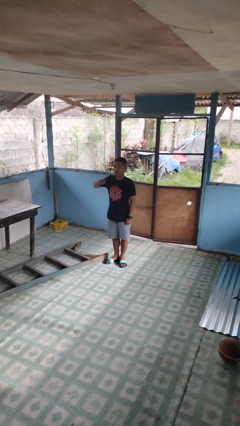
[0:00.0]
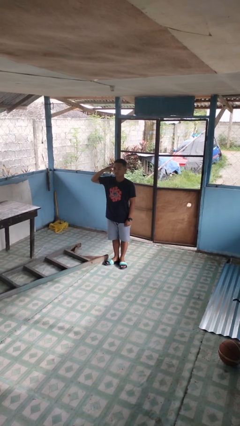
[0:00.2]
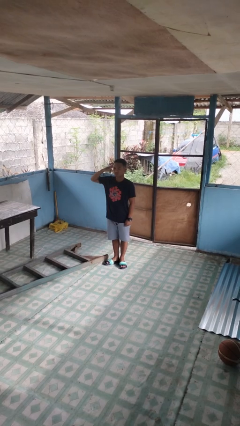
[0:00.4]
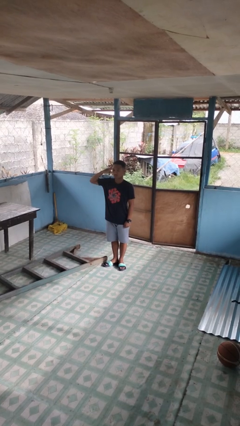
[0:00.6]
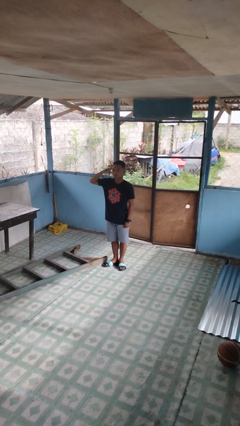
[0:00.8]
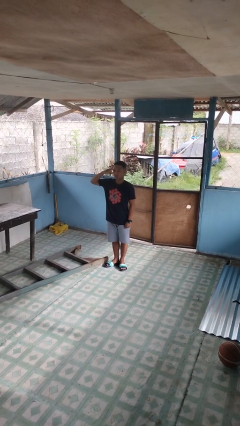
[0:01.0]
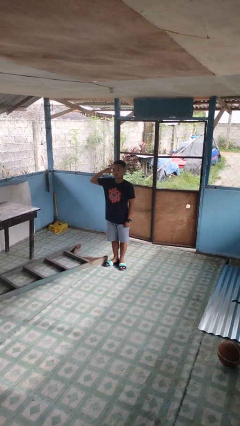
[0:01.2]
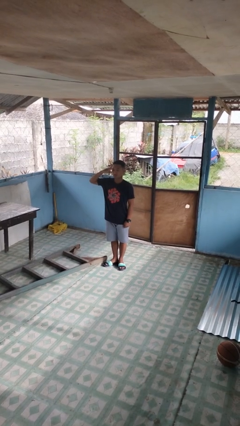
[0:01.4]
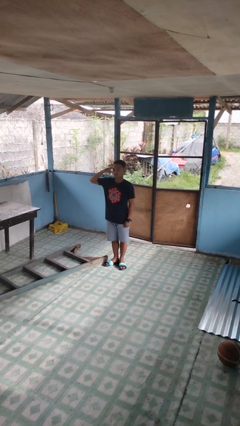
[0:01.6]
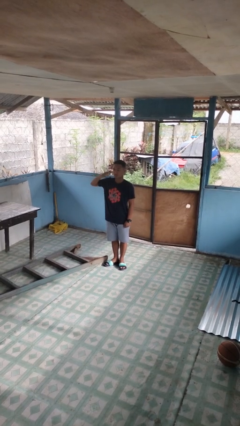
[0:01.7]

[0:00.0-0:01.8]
person salutes

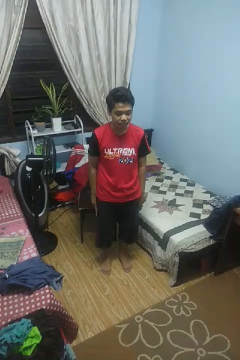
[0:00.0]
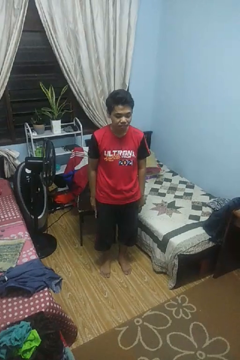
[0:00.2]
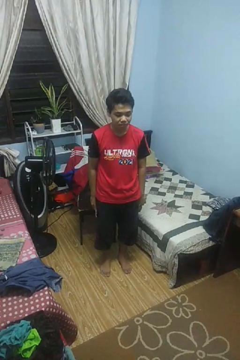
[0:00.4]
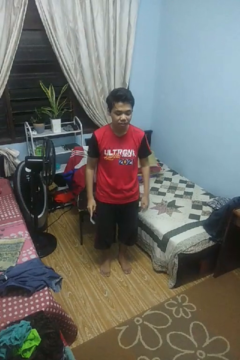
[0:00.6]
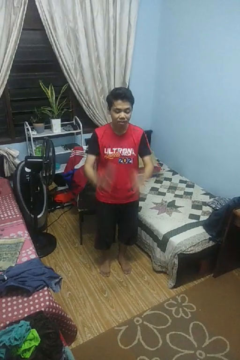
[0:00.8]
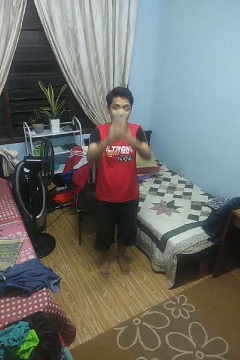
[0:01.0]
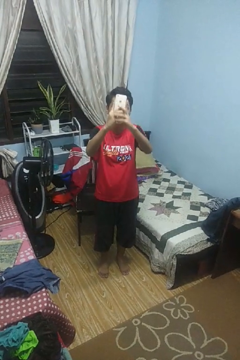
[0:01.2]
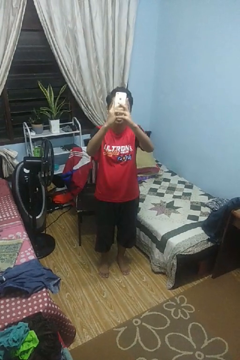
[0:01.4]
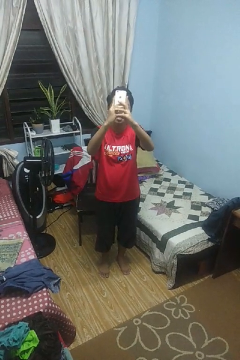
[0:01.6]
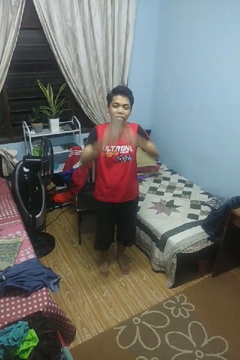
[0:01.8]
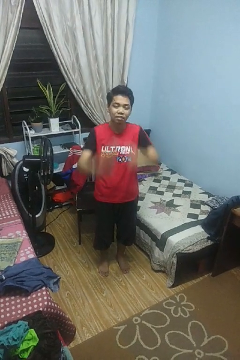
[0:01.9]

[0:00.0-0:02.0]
person takes selfie

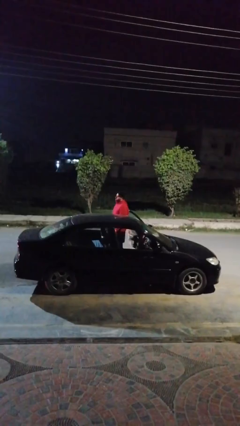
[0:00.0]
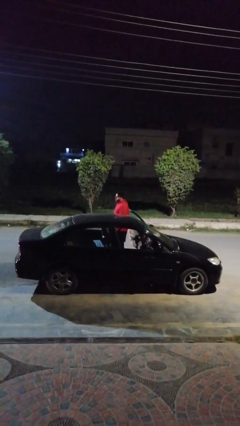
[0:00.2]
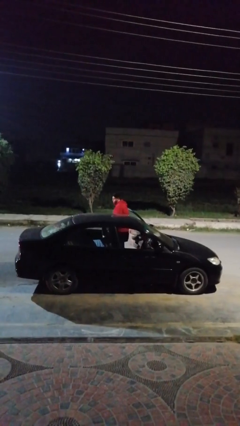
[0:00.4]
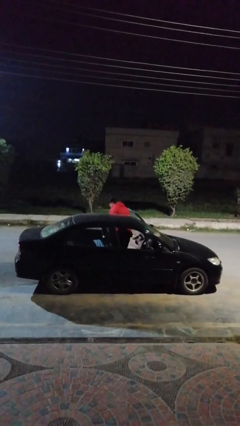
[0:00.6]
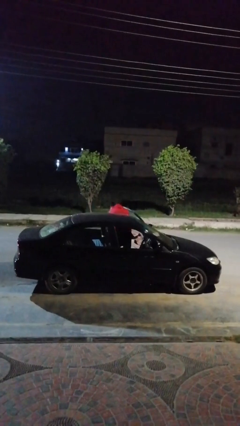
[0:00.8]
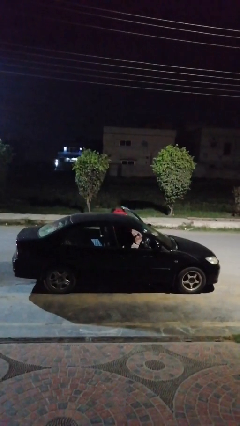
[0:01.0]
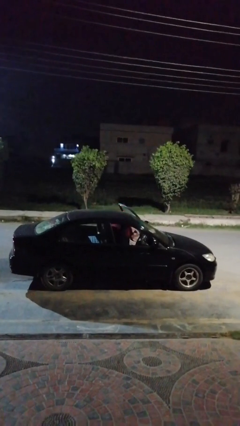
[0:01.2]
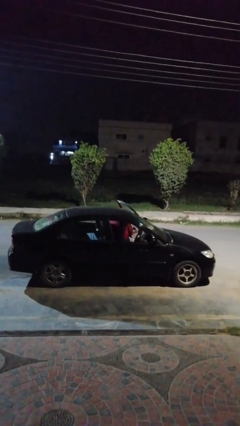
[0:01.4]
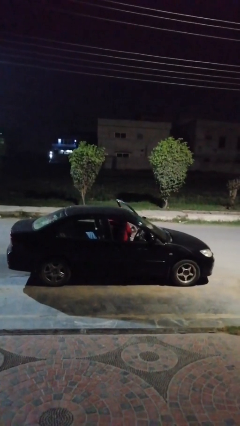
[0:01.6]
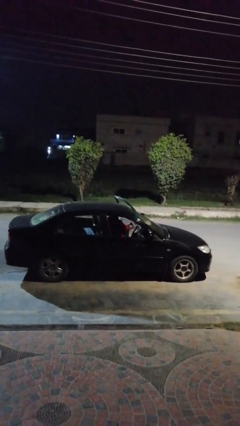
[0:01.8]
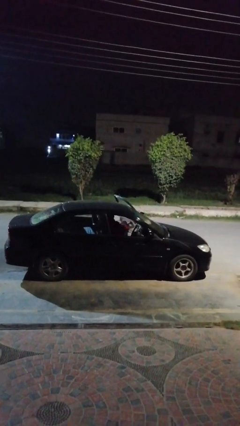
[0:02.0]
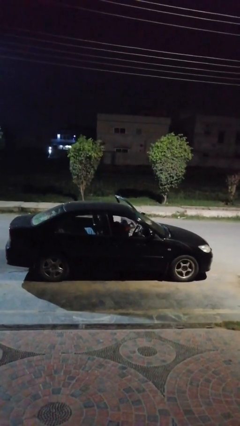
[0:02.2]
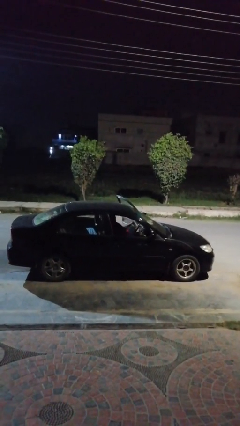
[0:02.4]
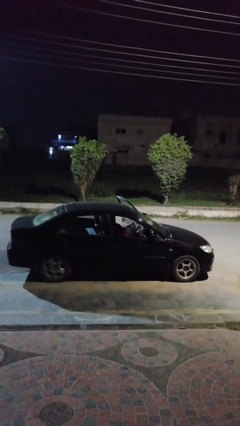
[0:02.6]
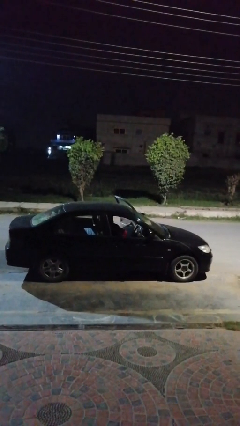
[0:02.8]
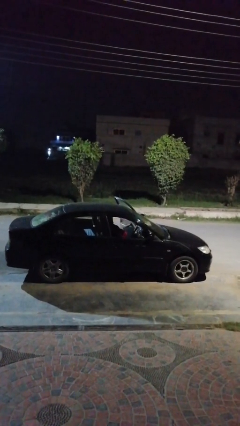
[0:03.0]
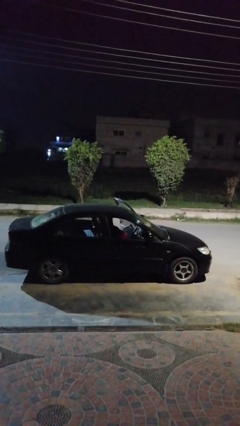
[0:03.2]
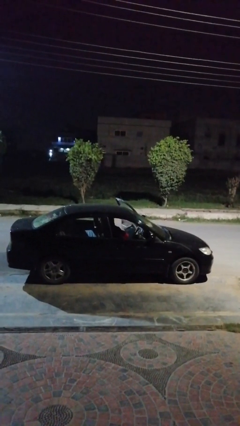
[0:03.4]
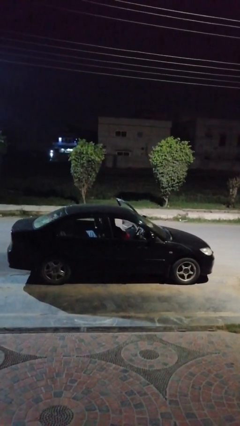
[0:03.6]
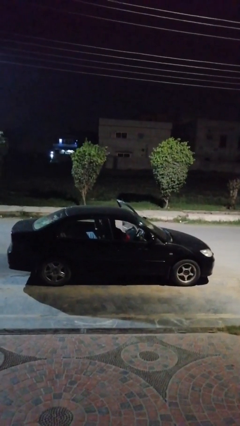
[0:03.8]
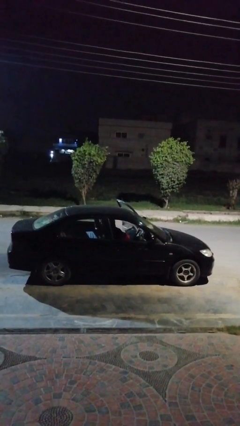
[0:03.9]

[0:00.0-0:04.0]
person enters car

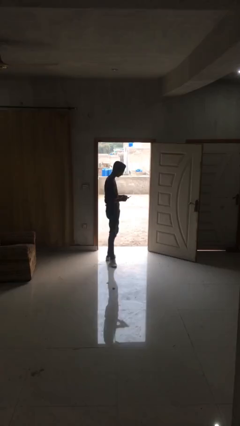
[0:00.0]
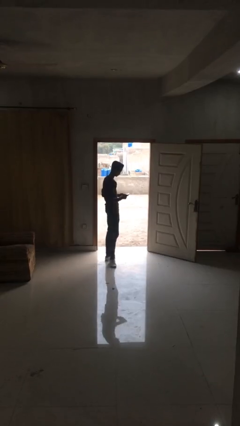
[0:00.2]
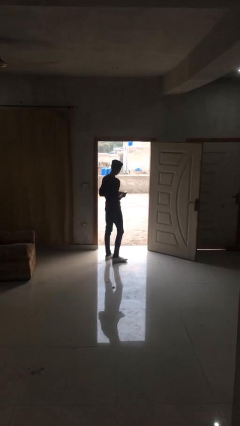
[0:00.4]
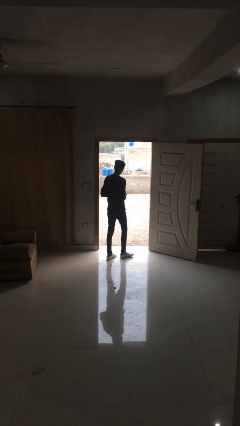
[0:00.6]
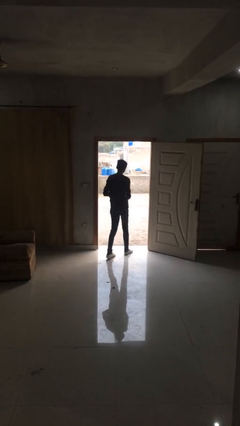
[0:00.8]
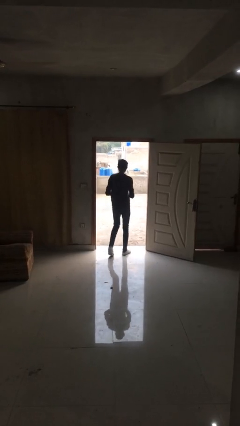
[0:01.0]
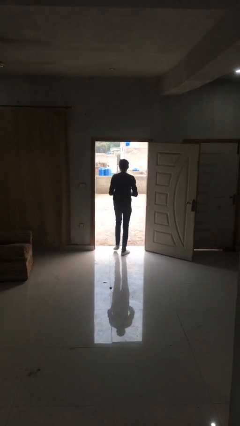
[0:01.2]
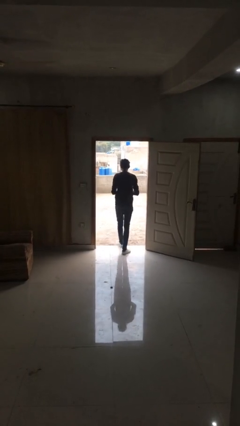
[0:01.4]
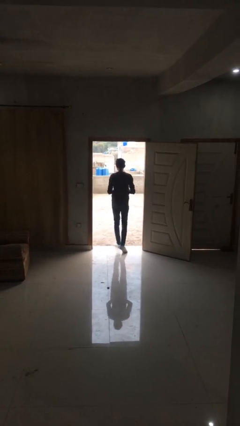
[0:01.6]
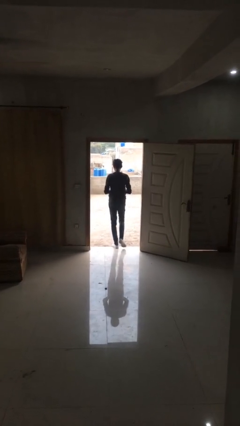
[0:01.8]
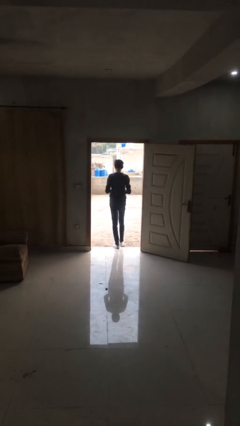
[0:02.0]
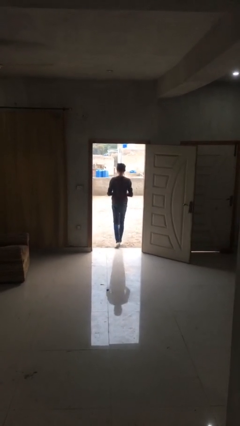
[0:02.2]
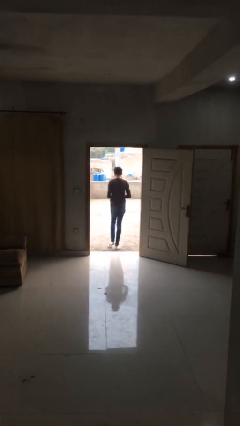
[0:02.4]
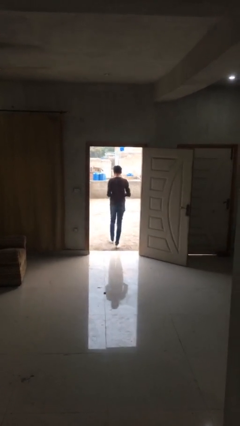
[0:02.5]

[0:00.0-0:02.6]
person exits scene through structure

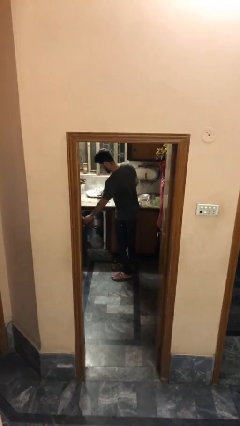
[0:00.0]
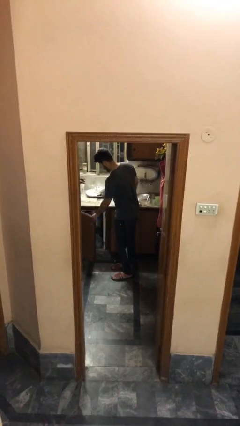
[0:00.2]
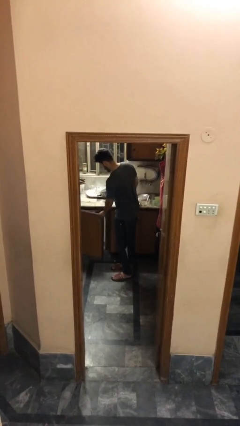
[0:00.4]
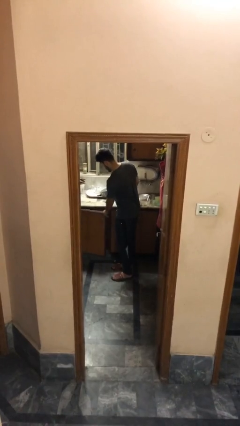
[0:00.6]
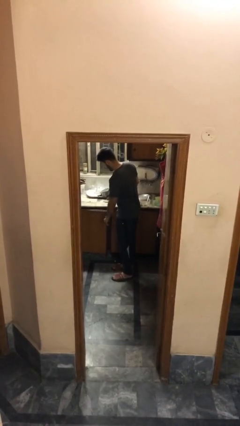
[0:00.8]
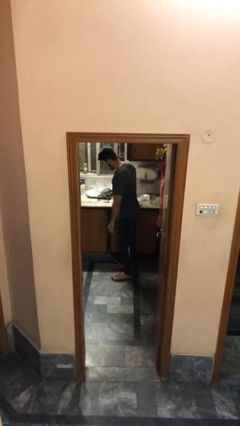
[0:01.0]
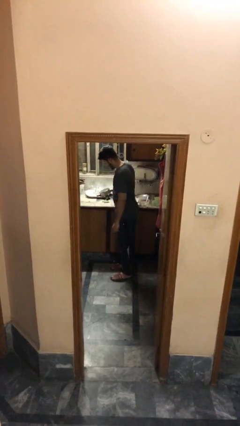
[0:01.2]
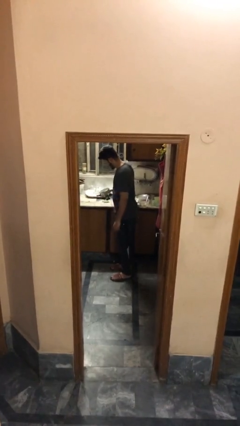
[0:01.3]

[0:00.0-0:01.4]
person closes cabinet

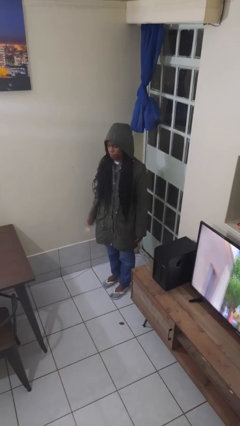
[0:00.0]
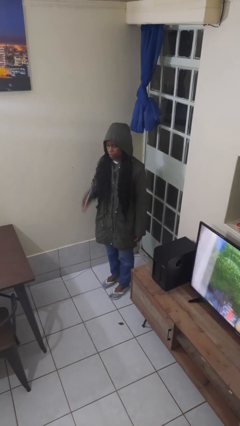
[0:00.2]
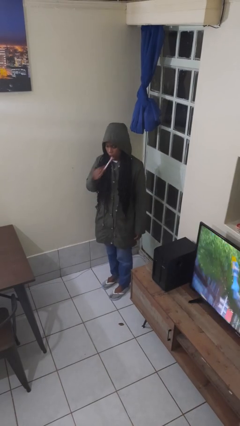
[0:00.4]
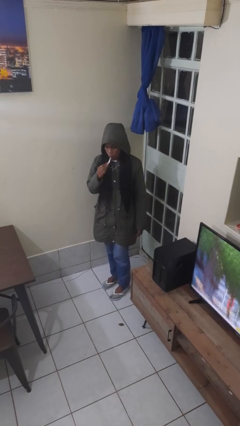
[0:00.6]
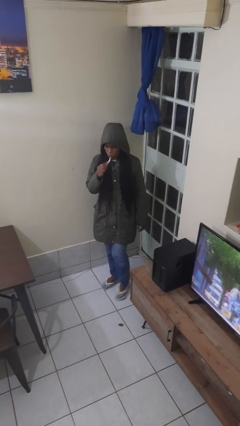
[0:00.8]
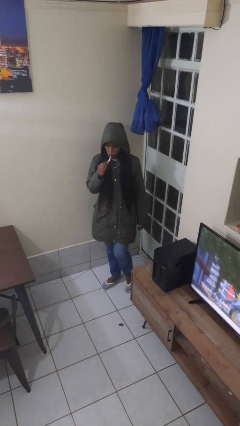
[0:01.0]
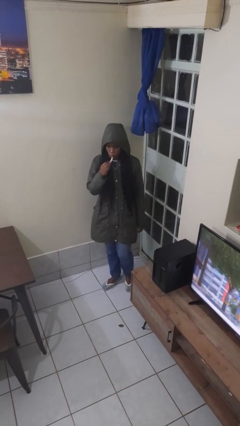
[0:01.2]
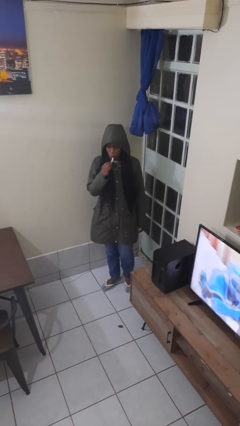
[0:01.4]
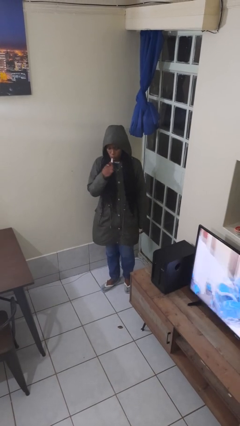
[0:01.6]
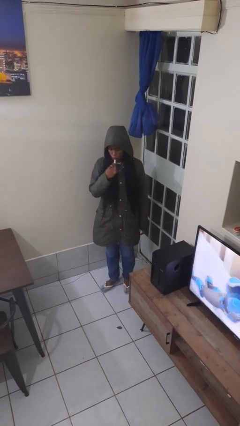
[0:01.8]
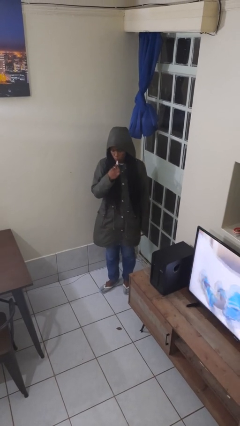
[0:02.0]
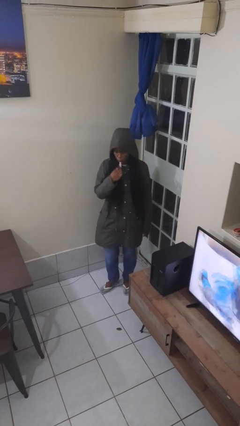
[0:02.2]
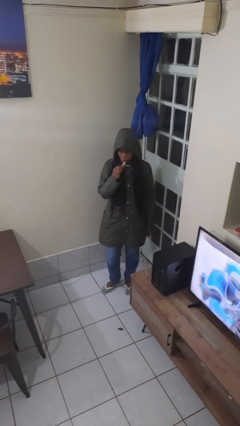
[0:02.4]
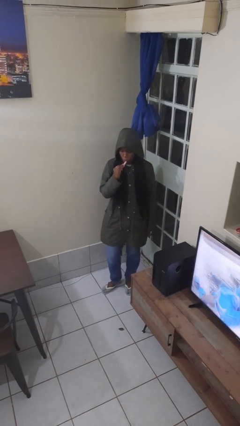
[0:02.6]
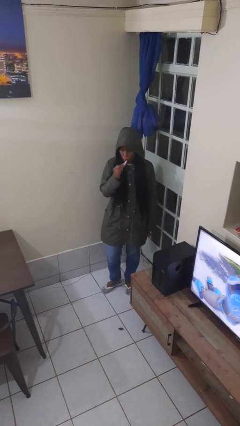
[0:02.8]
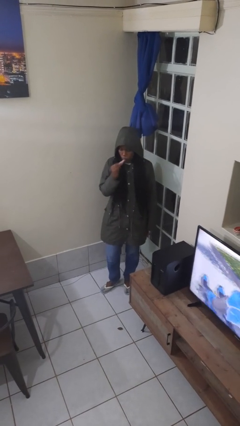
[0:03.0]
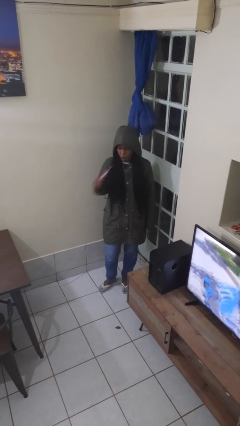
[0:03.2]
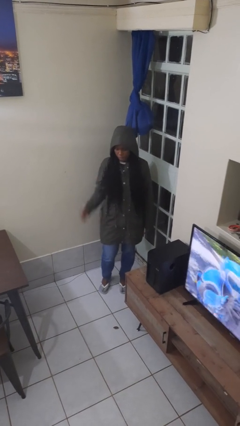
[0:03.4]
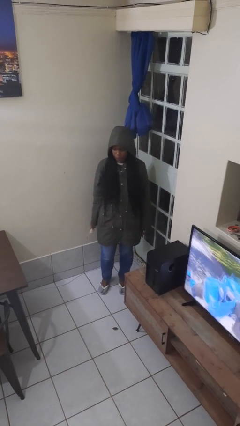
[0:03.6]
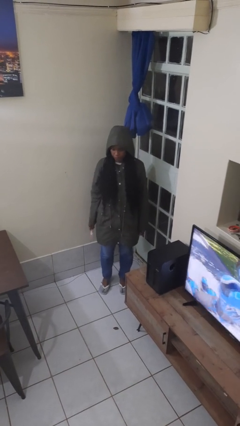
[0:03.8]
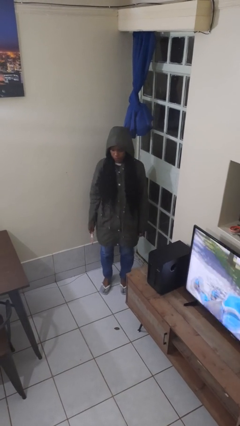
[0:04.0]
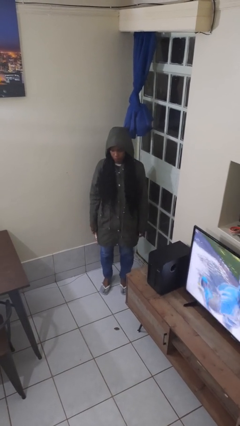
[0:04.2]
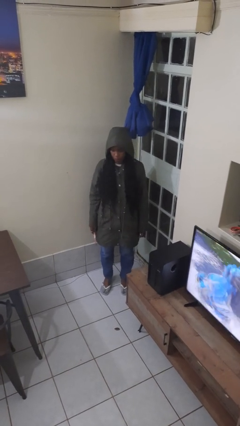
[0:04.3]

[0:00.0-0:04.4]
person brushes teeth

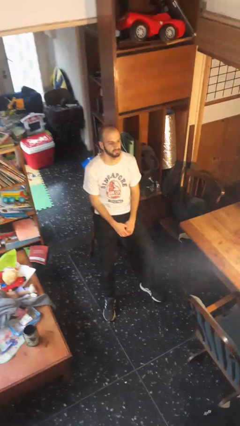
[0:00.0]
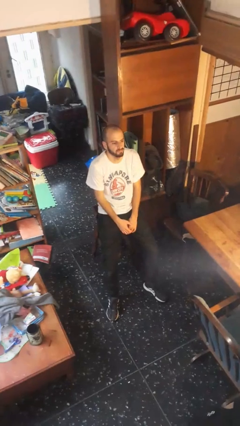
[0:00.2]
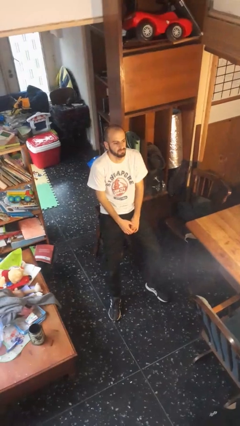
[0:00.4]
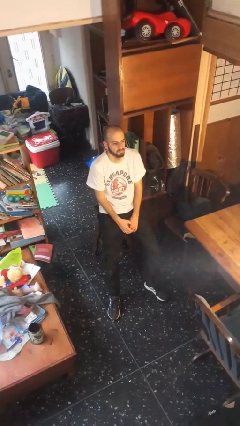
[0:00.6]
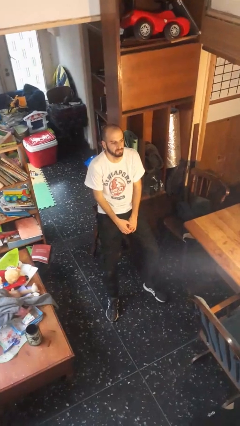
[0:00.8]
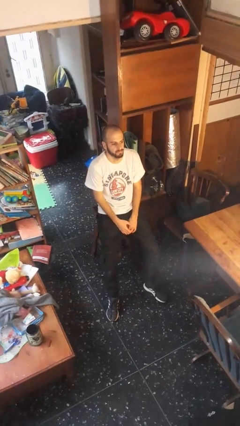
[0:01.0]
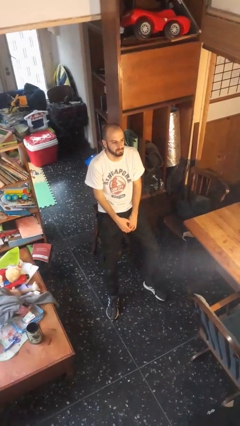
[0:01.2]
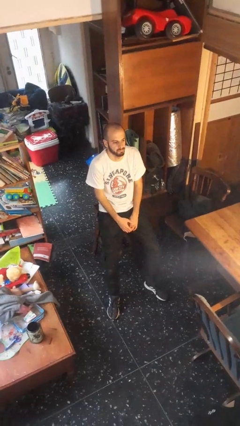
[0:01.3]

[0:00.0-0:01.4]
person shrugs
